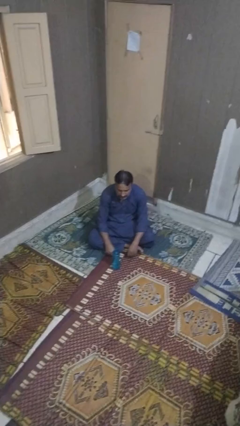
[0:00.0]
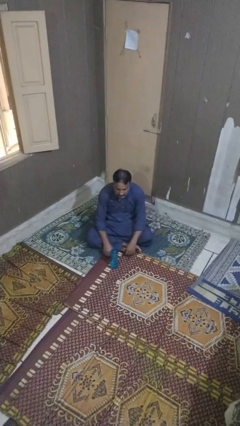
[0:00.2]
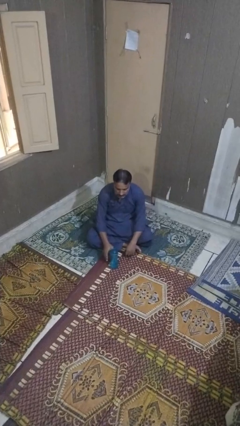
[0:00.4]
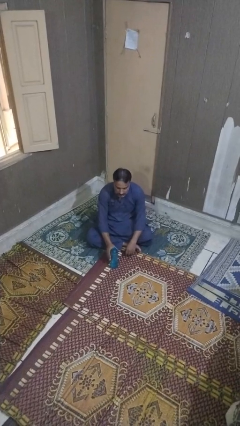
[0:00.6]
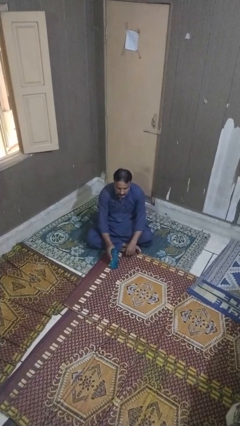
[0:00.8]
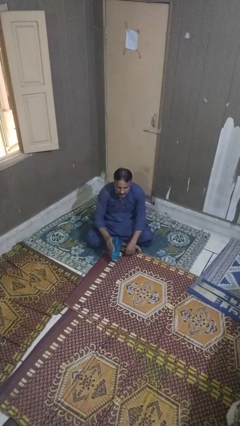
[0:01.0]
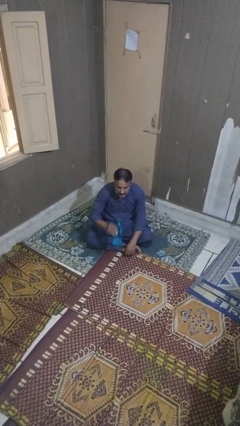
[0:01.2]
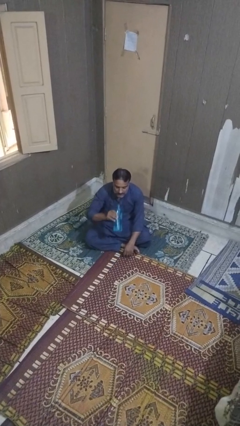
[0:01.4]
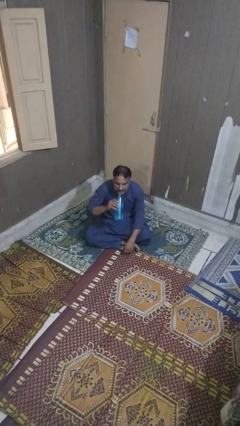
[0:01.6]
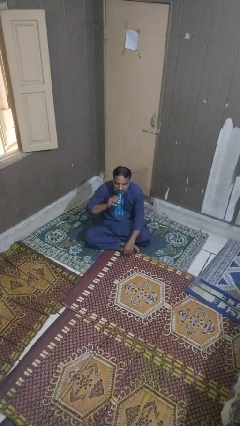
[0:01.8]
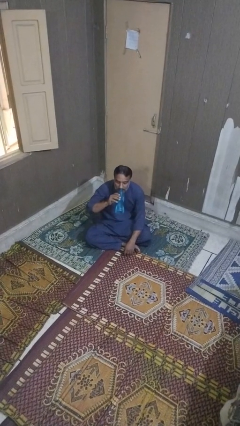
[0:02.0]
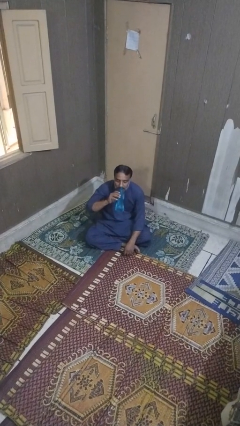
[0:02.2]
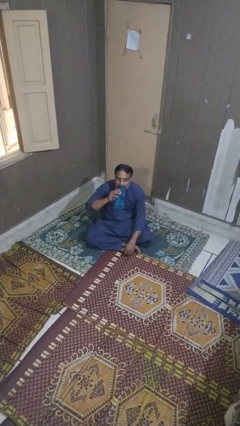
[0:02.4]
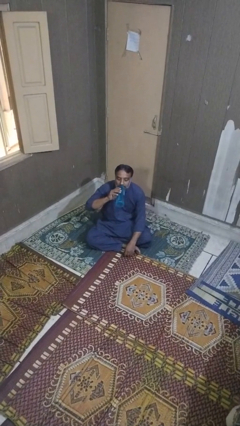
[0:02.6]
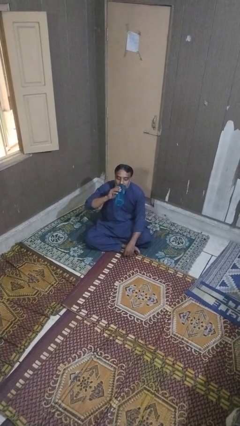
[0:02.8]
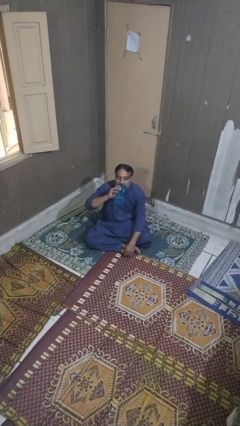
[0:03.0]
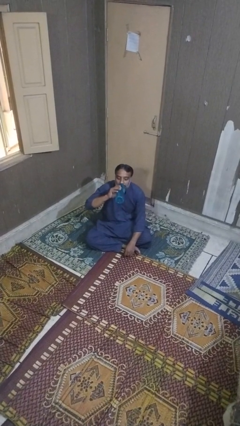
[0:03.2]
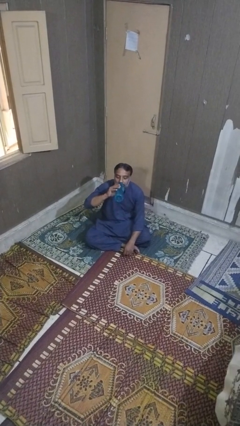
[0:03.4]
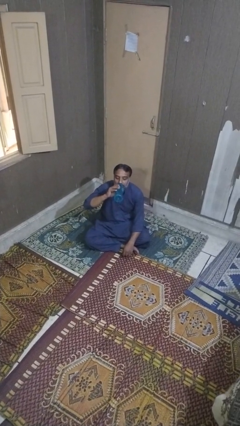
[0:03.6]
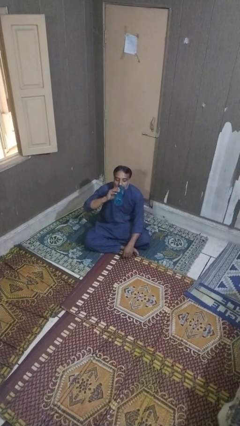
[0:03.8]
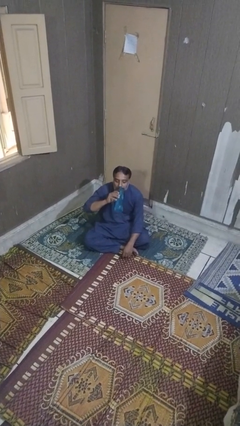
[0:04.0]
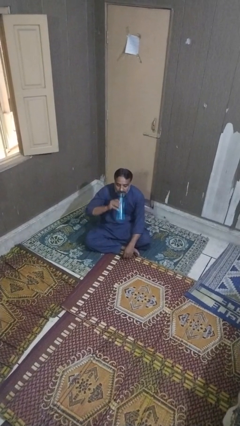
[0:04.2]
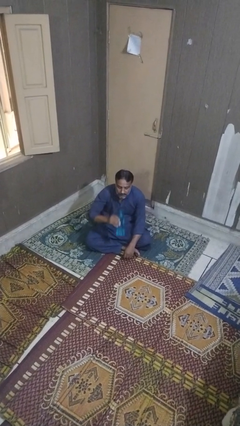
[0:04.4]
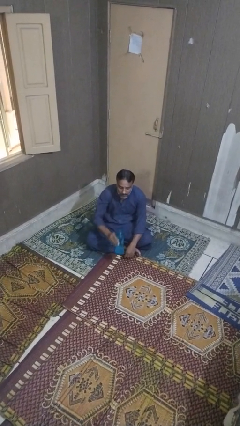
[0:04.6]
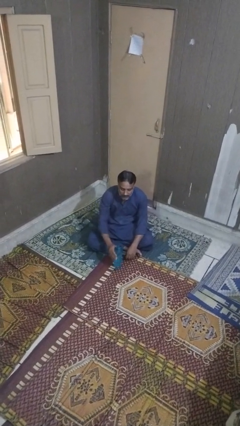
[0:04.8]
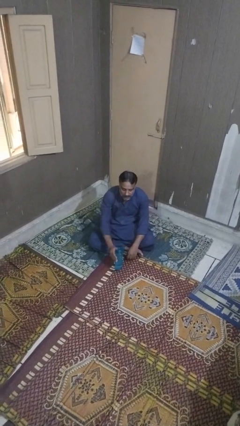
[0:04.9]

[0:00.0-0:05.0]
person drinks from bottle

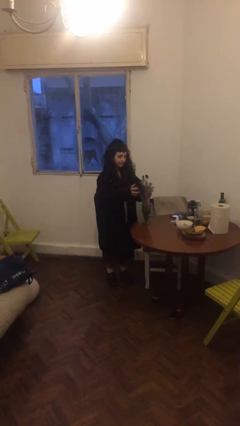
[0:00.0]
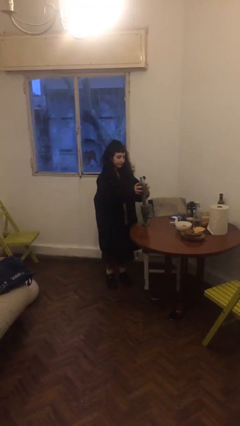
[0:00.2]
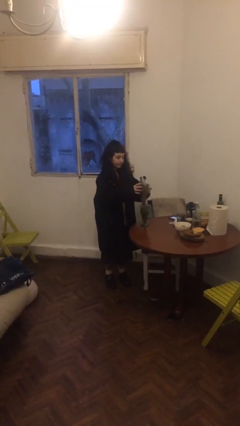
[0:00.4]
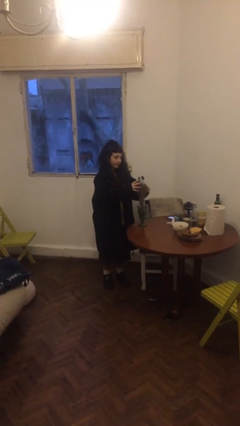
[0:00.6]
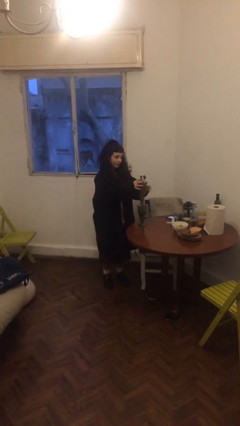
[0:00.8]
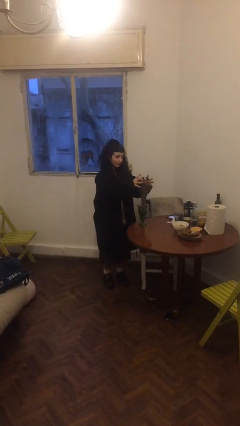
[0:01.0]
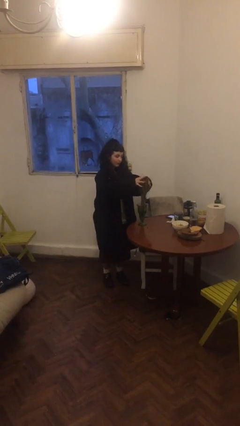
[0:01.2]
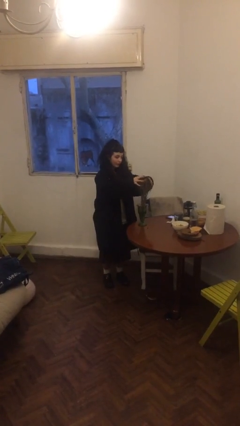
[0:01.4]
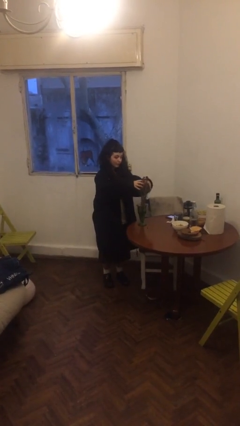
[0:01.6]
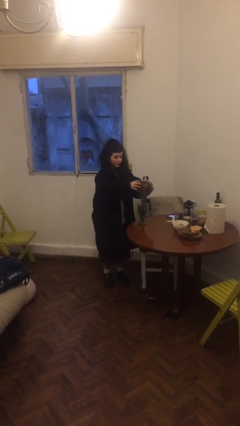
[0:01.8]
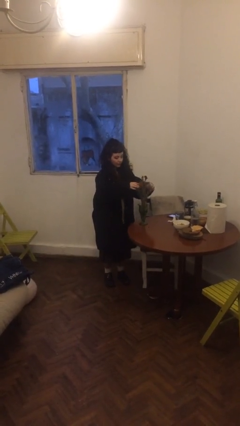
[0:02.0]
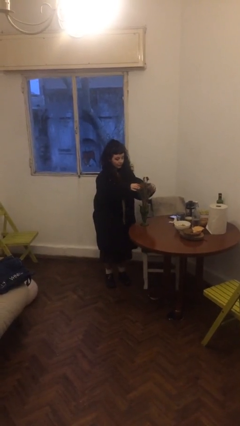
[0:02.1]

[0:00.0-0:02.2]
person arranges flowers in vase

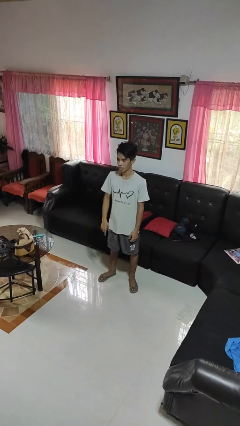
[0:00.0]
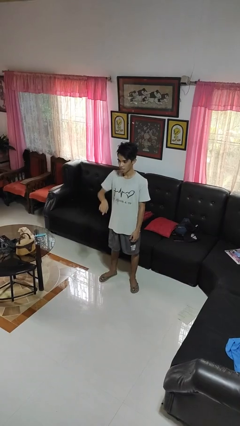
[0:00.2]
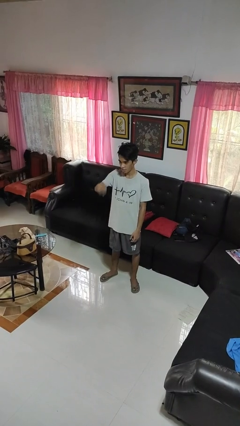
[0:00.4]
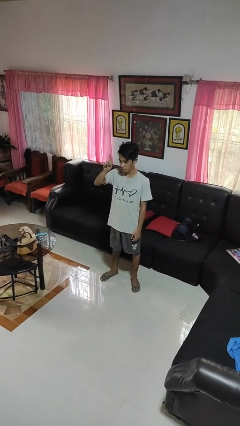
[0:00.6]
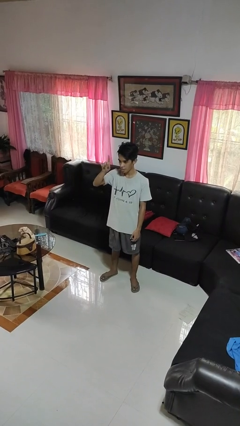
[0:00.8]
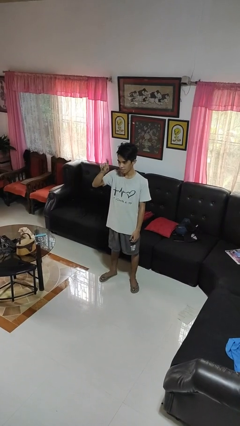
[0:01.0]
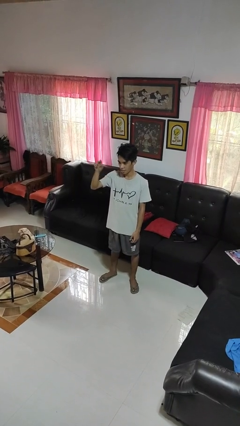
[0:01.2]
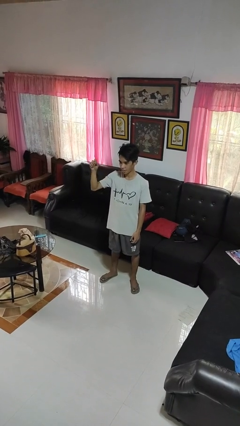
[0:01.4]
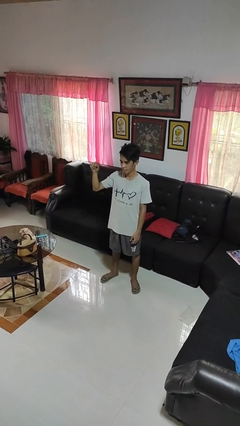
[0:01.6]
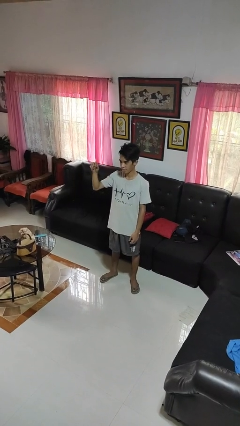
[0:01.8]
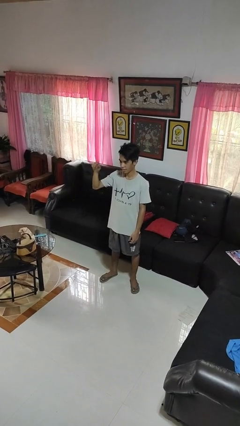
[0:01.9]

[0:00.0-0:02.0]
person gestures swipe up

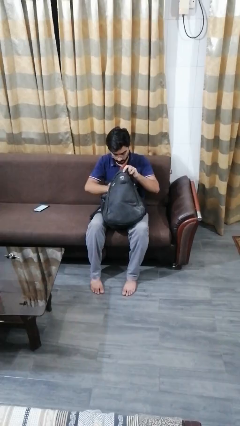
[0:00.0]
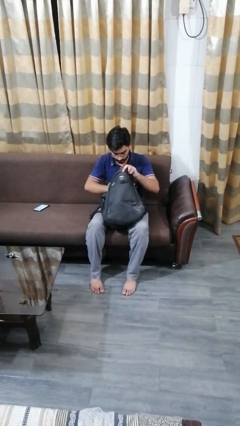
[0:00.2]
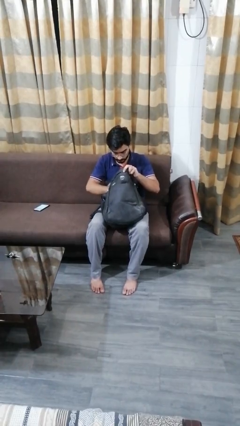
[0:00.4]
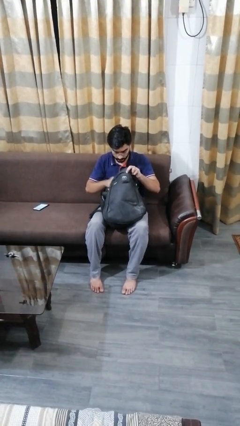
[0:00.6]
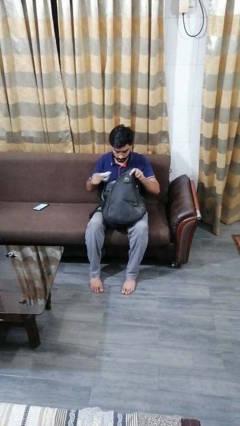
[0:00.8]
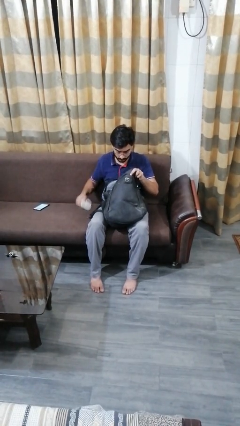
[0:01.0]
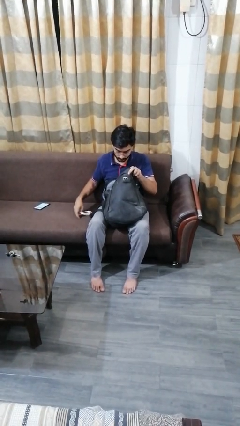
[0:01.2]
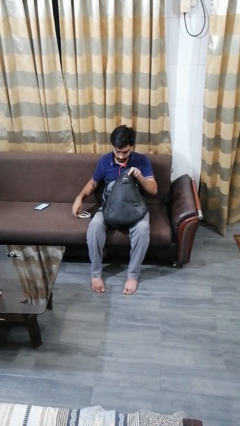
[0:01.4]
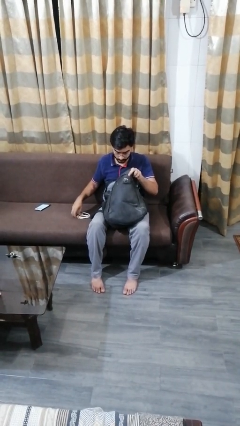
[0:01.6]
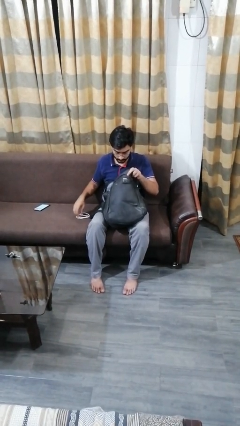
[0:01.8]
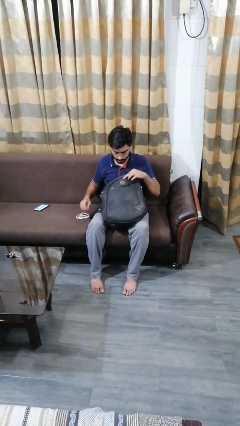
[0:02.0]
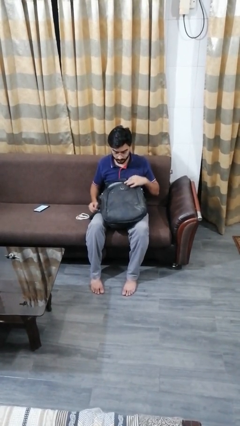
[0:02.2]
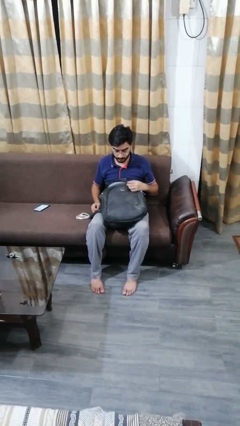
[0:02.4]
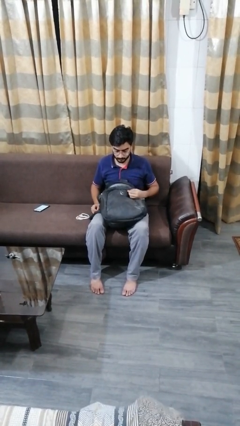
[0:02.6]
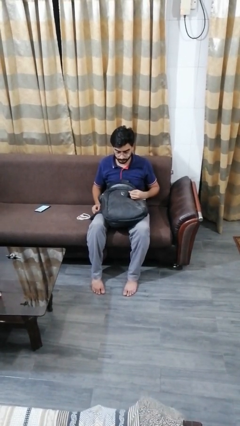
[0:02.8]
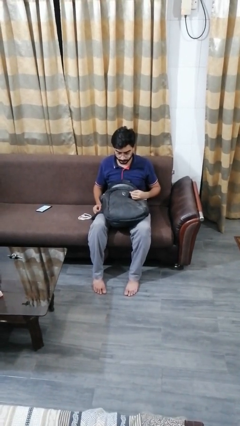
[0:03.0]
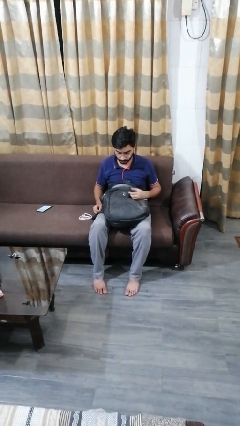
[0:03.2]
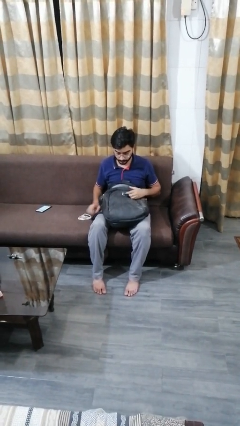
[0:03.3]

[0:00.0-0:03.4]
person takes object from backpack

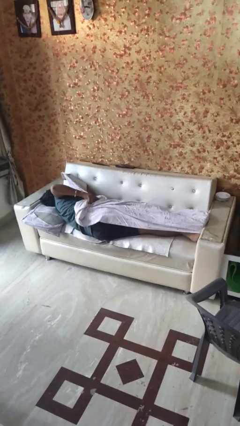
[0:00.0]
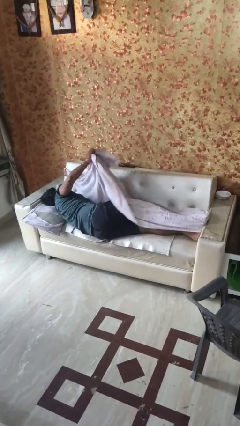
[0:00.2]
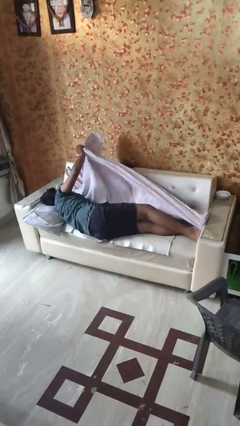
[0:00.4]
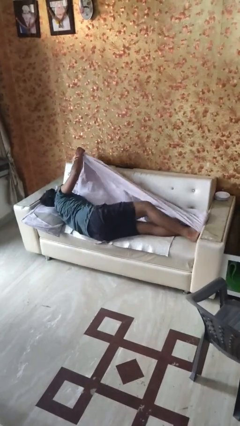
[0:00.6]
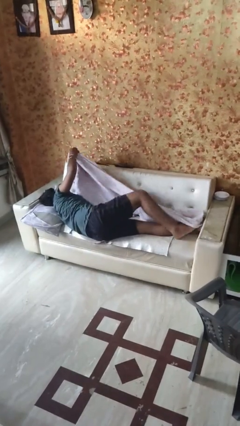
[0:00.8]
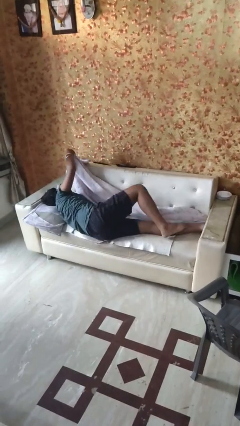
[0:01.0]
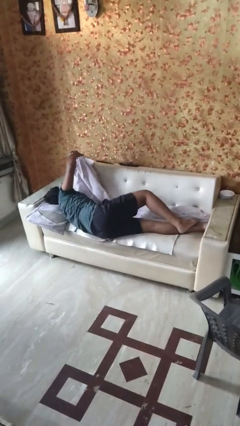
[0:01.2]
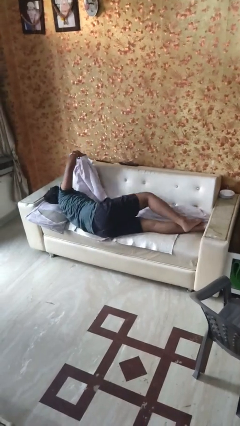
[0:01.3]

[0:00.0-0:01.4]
person uncovers with bedsheets

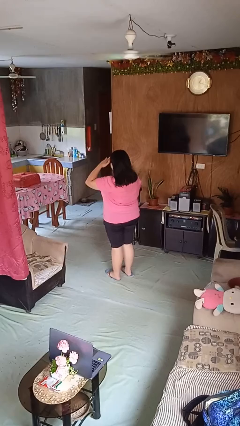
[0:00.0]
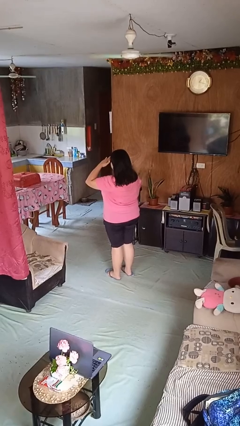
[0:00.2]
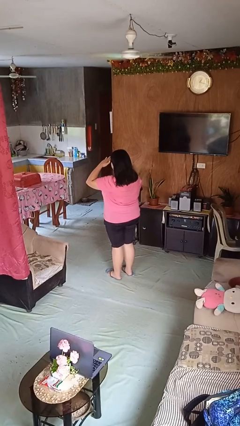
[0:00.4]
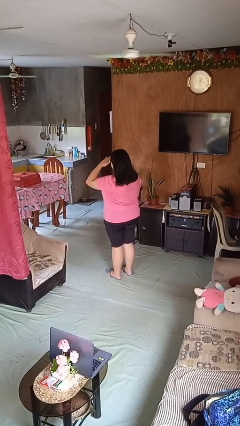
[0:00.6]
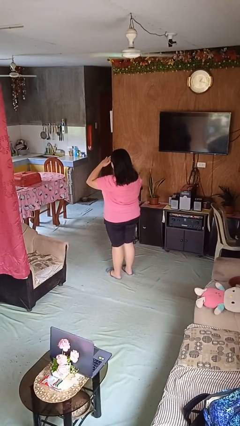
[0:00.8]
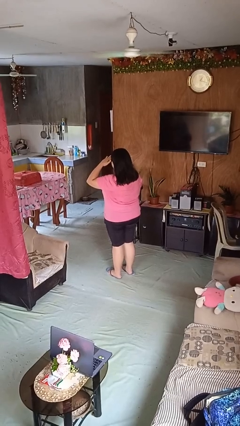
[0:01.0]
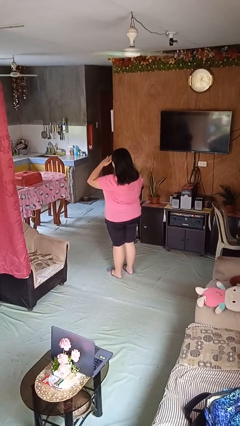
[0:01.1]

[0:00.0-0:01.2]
person salutes

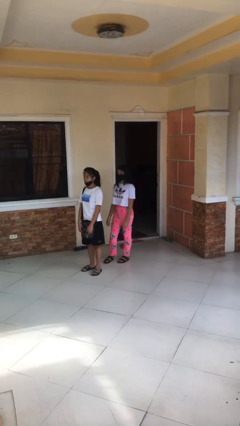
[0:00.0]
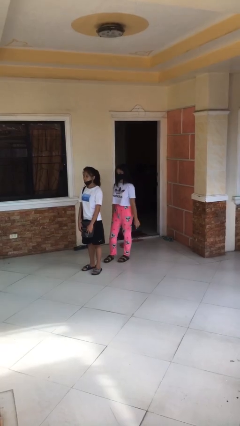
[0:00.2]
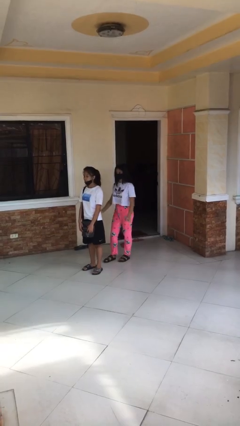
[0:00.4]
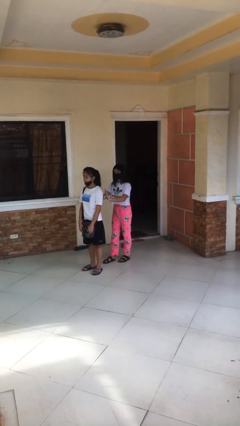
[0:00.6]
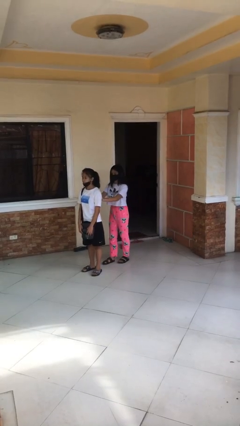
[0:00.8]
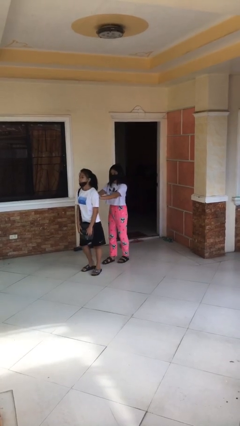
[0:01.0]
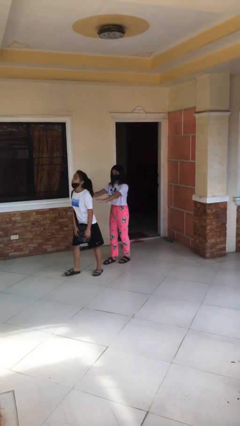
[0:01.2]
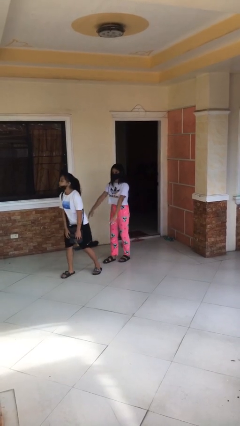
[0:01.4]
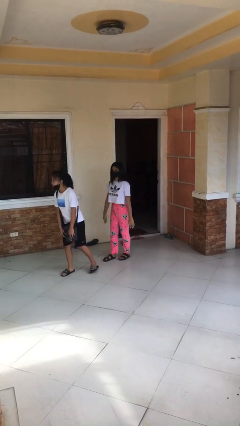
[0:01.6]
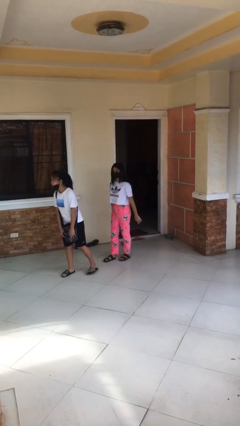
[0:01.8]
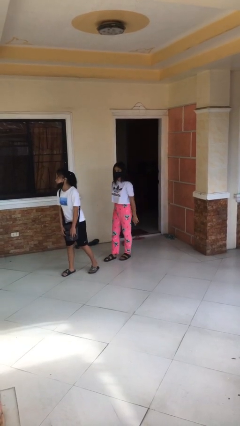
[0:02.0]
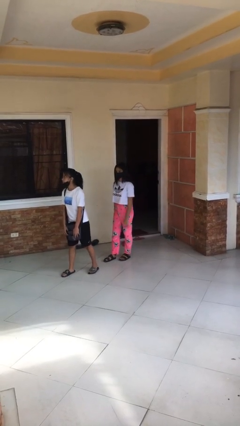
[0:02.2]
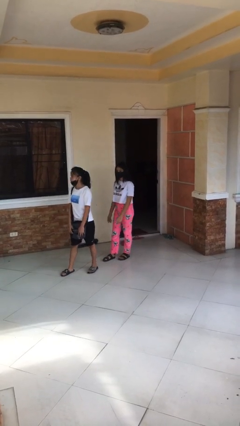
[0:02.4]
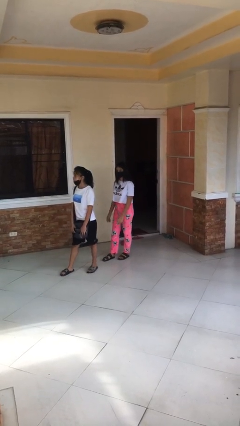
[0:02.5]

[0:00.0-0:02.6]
person shoves person
